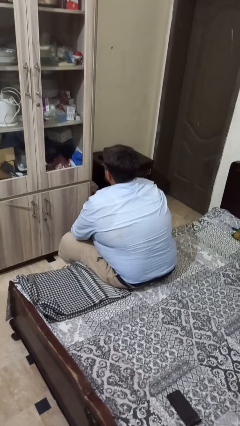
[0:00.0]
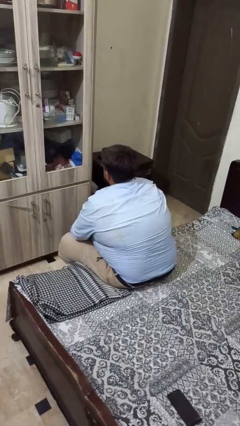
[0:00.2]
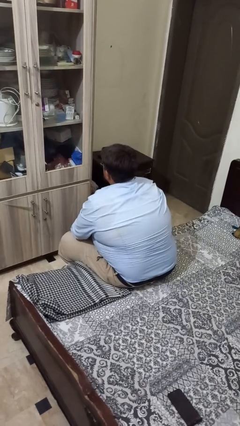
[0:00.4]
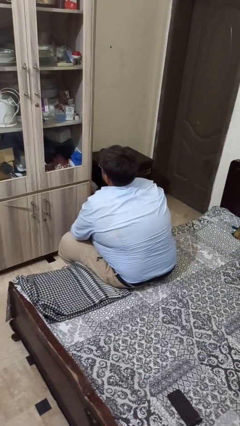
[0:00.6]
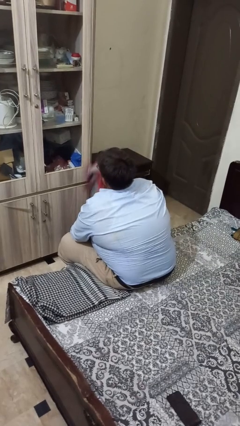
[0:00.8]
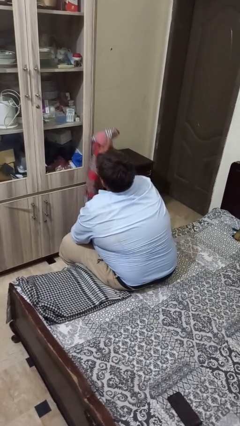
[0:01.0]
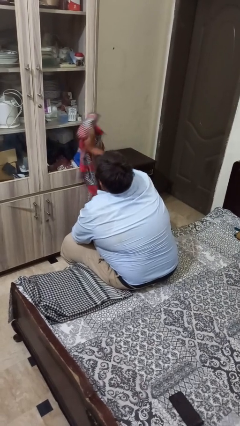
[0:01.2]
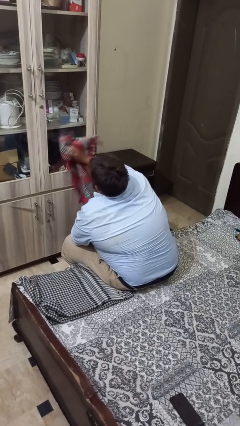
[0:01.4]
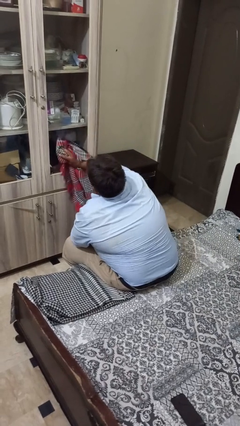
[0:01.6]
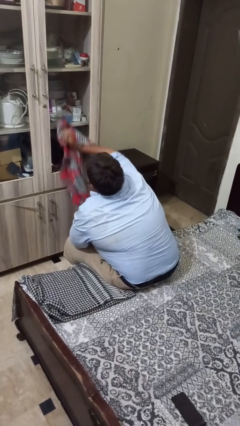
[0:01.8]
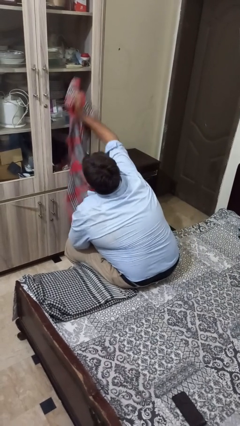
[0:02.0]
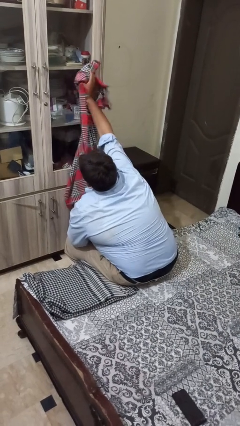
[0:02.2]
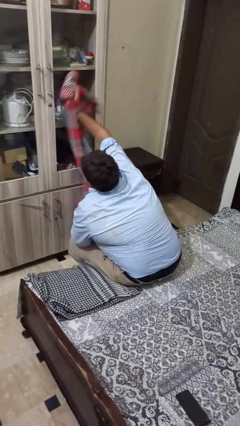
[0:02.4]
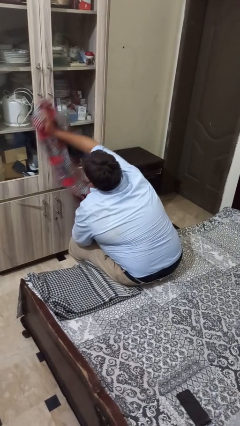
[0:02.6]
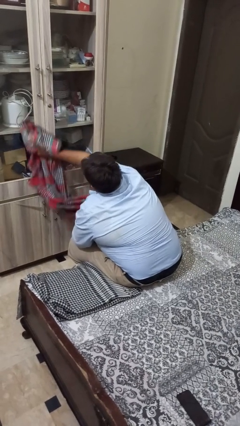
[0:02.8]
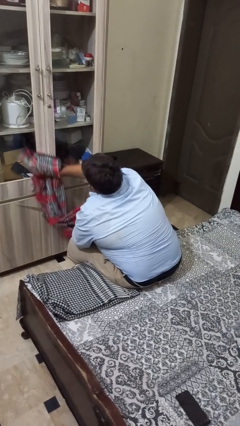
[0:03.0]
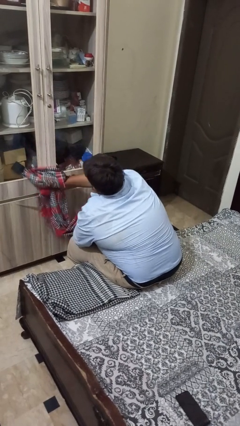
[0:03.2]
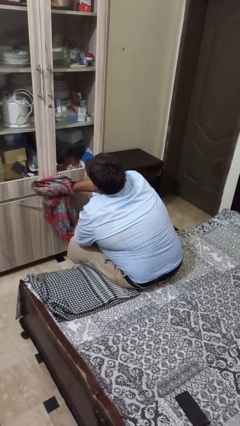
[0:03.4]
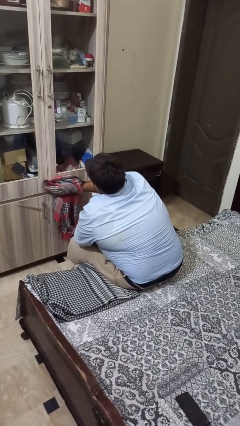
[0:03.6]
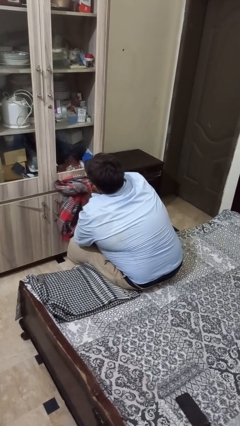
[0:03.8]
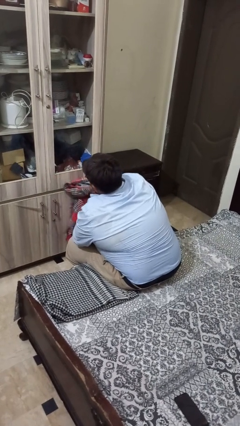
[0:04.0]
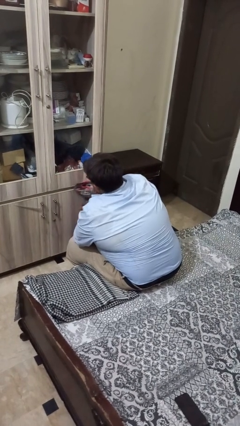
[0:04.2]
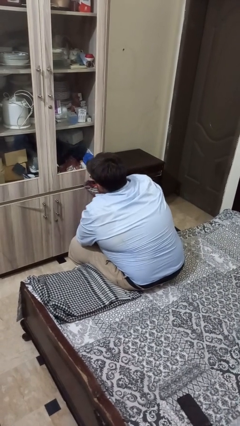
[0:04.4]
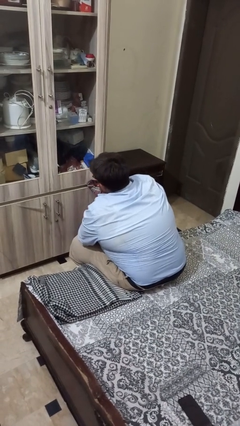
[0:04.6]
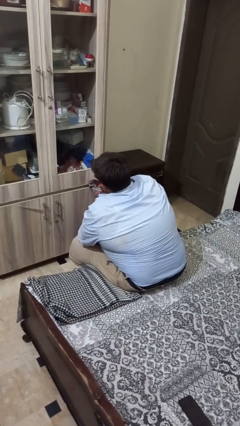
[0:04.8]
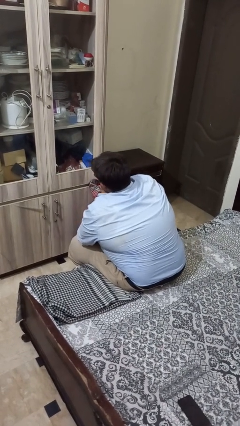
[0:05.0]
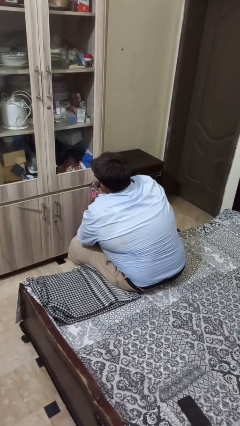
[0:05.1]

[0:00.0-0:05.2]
person dusts furniture

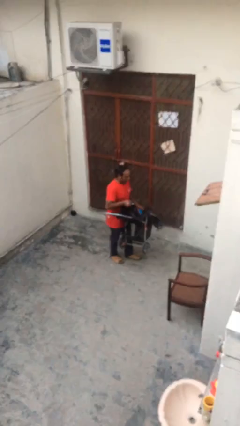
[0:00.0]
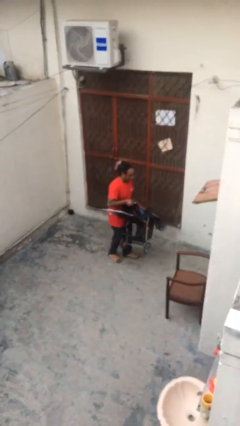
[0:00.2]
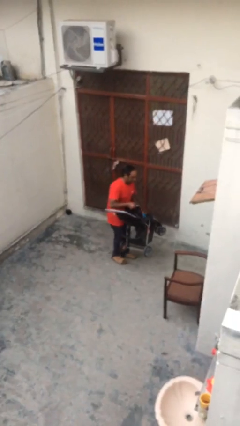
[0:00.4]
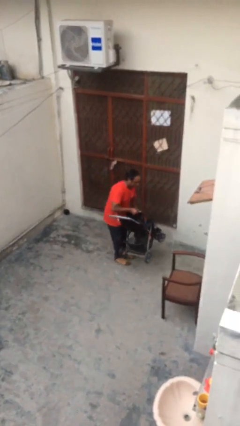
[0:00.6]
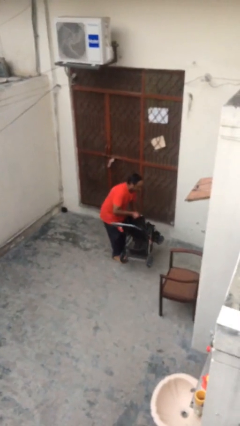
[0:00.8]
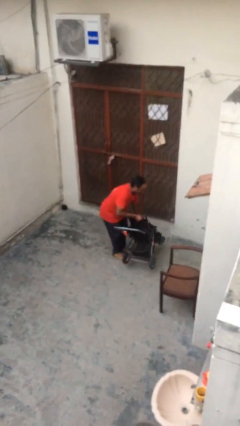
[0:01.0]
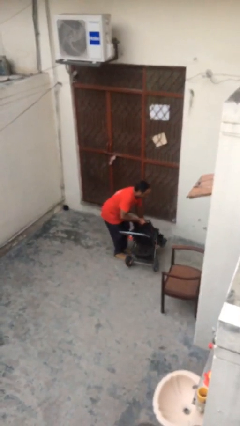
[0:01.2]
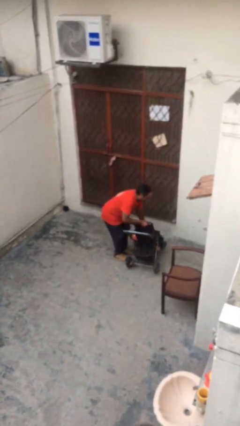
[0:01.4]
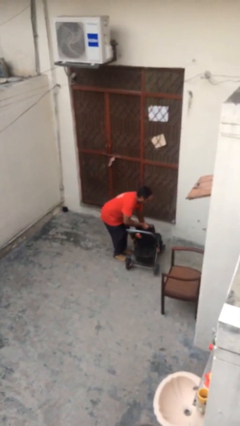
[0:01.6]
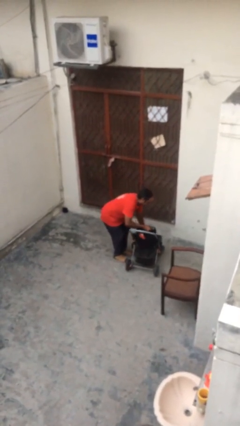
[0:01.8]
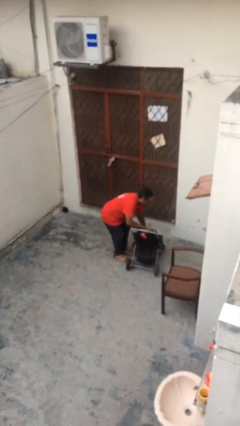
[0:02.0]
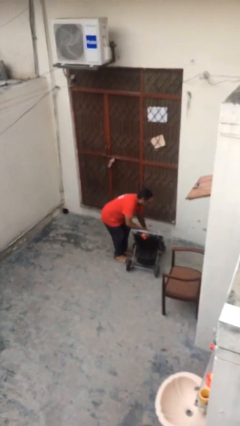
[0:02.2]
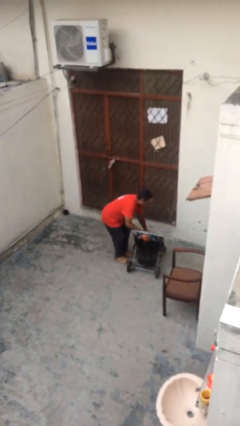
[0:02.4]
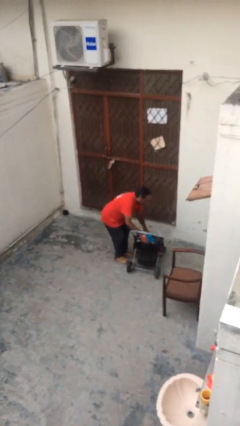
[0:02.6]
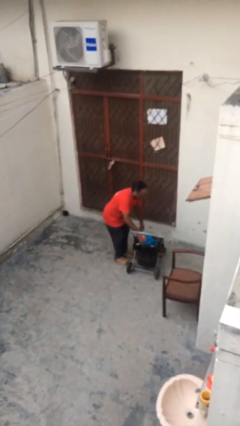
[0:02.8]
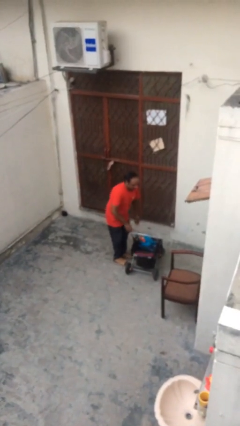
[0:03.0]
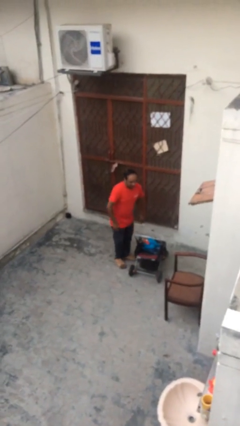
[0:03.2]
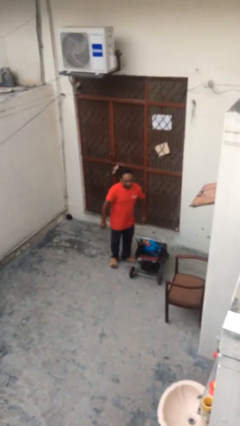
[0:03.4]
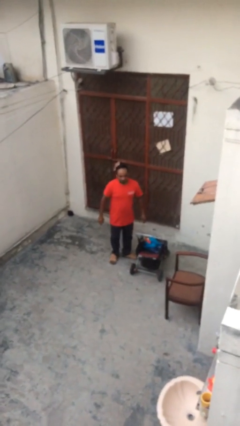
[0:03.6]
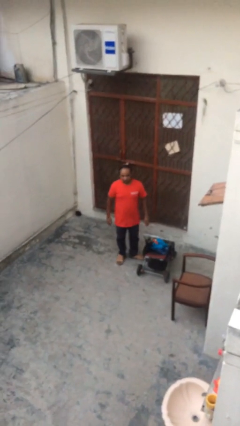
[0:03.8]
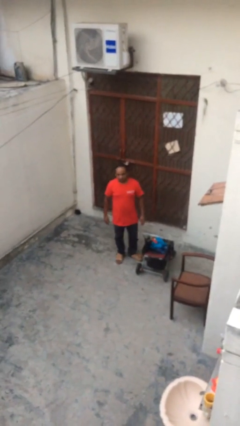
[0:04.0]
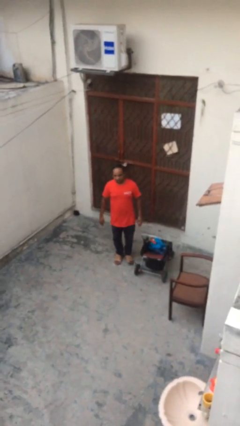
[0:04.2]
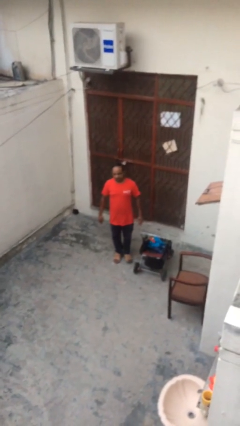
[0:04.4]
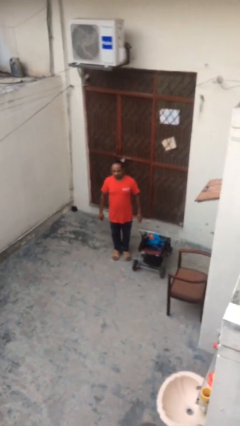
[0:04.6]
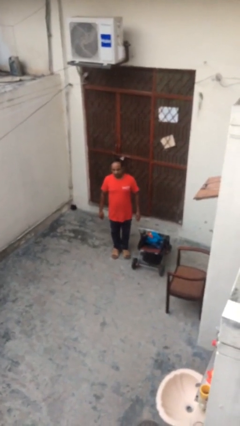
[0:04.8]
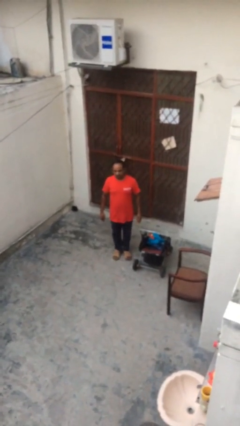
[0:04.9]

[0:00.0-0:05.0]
person puts down object on floor

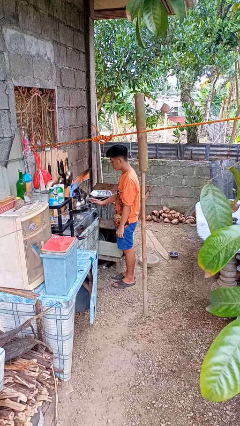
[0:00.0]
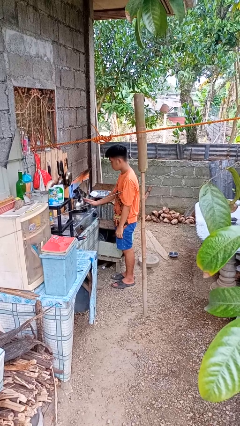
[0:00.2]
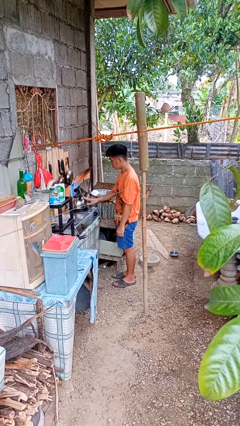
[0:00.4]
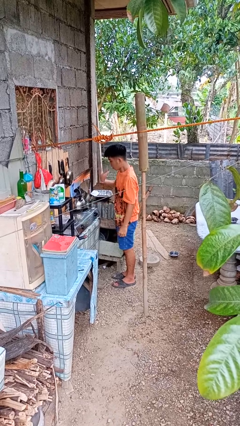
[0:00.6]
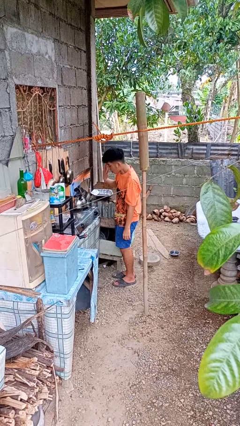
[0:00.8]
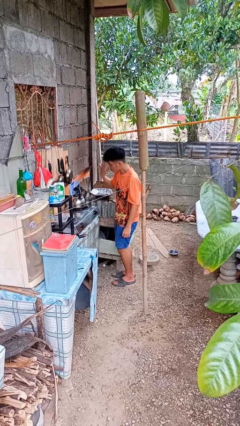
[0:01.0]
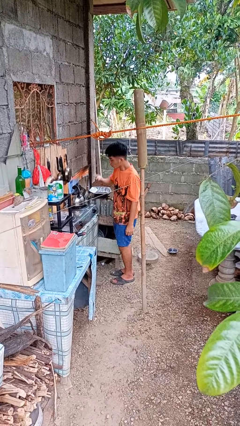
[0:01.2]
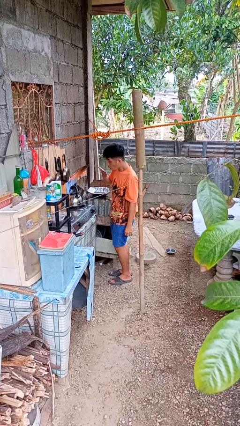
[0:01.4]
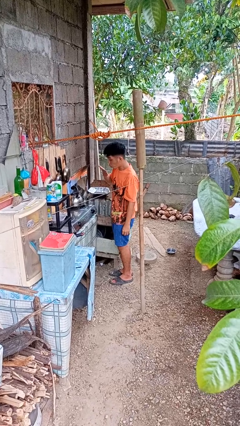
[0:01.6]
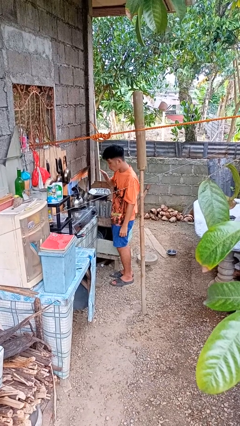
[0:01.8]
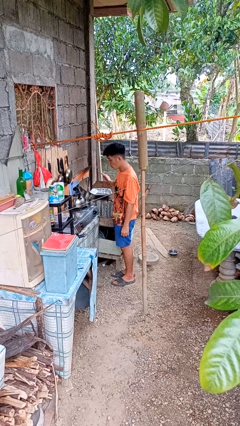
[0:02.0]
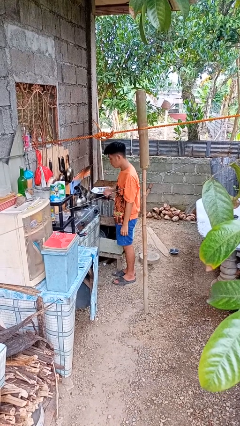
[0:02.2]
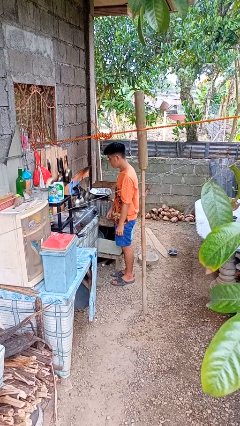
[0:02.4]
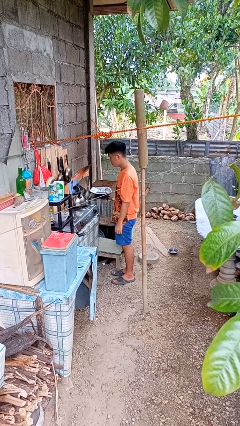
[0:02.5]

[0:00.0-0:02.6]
person burns hand

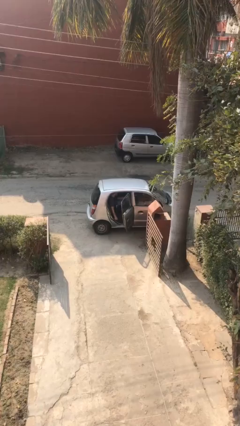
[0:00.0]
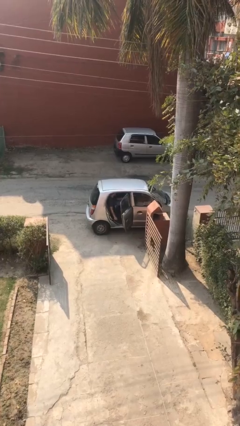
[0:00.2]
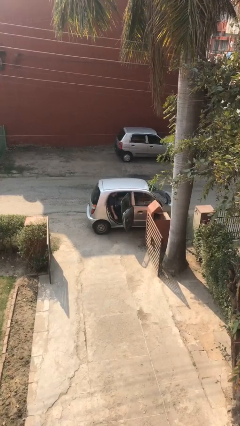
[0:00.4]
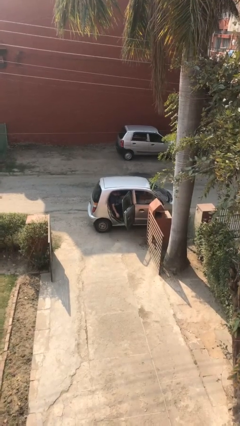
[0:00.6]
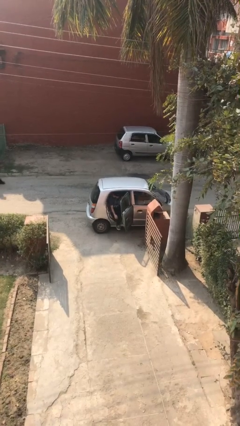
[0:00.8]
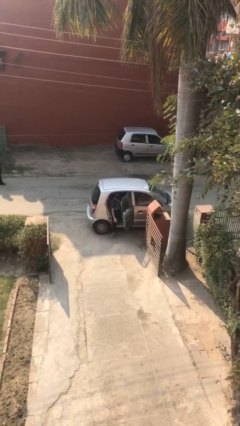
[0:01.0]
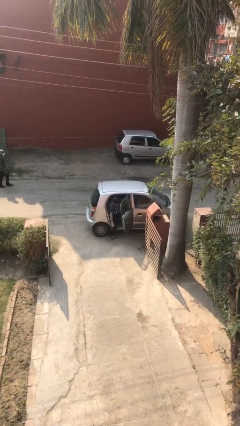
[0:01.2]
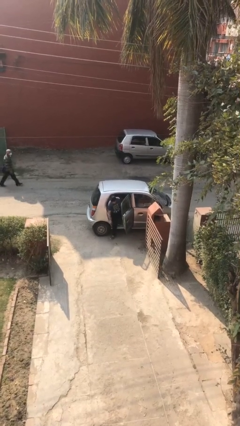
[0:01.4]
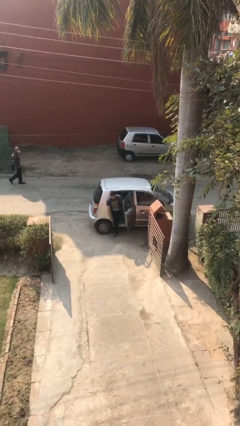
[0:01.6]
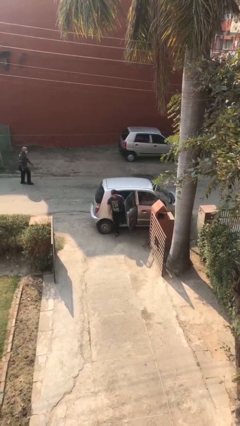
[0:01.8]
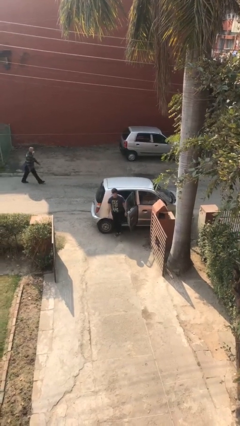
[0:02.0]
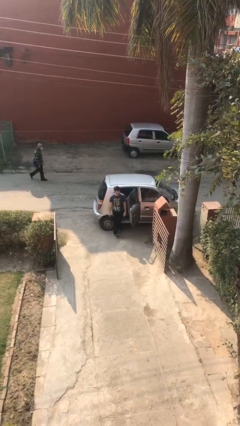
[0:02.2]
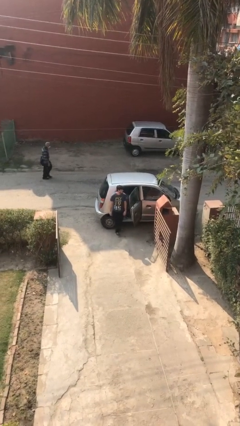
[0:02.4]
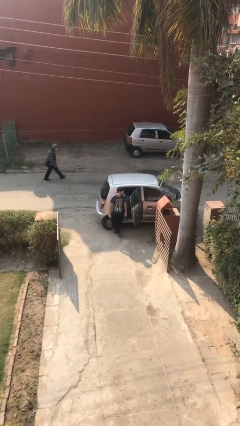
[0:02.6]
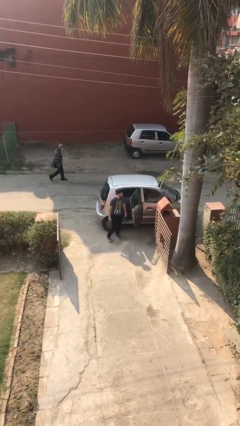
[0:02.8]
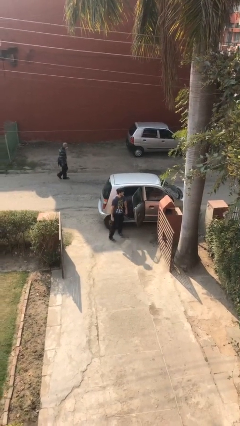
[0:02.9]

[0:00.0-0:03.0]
person exits car

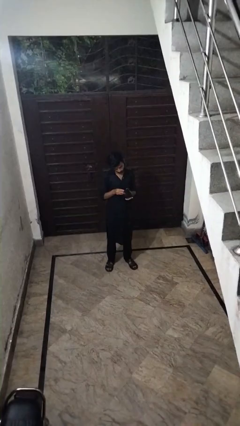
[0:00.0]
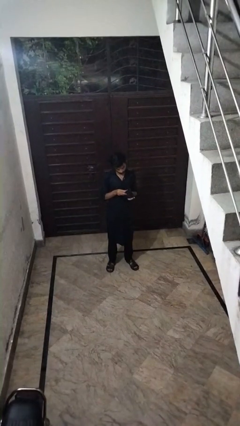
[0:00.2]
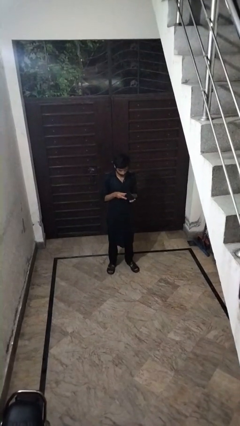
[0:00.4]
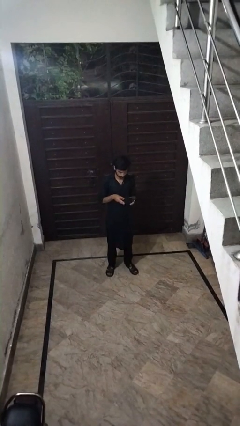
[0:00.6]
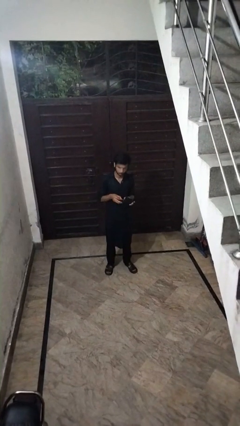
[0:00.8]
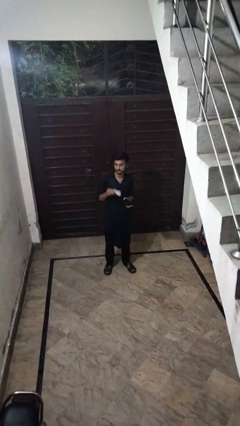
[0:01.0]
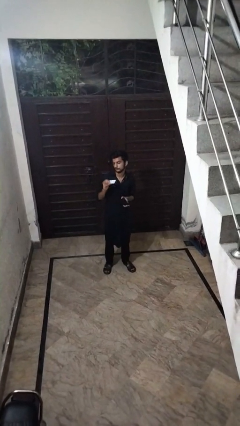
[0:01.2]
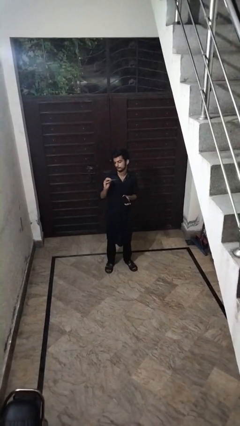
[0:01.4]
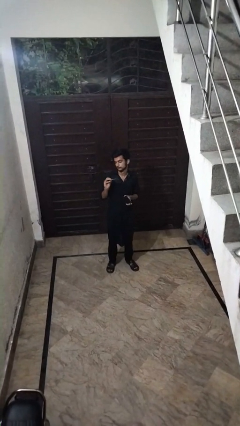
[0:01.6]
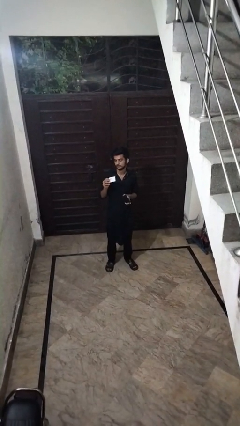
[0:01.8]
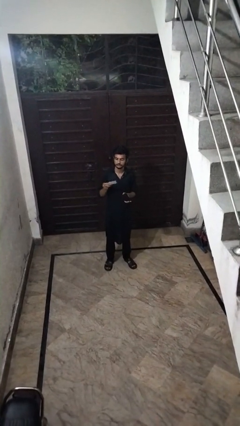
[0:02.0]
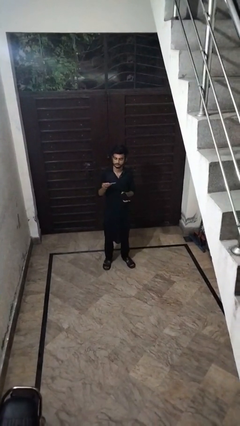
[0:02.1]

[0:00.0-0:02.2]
person takes object from purse
